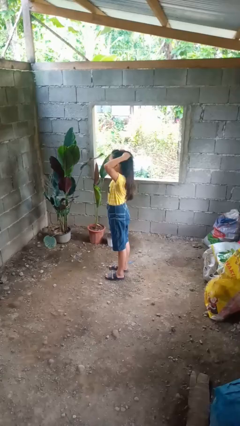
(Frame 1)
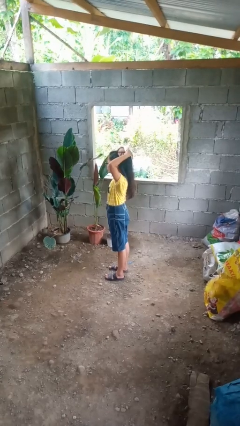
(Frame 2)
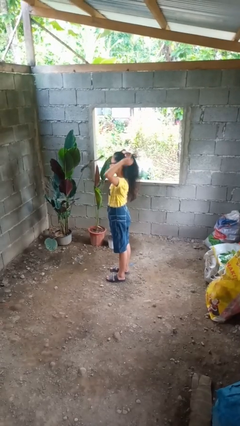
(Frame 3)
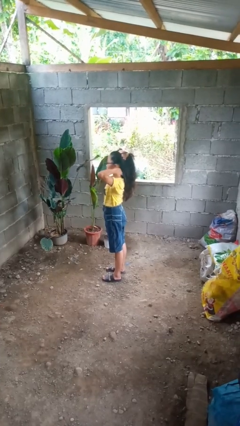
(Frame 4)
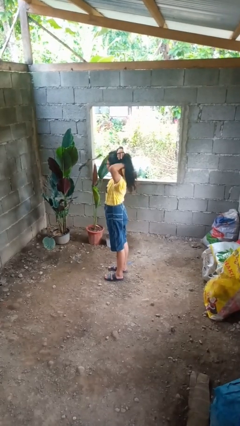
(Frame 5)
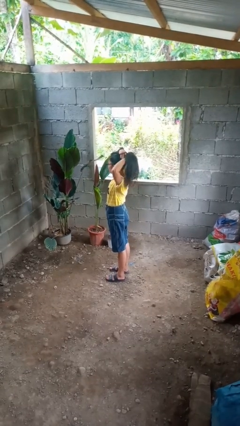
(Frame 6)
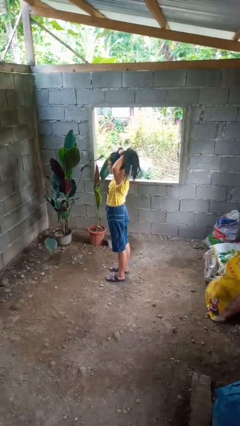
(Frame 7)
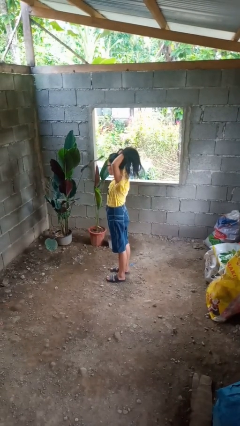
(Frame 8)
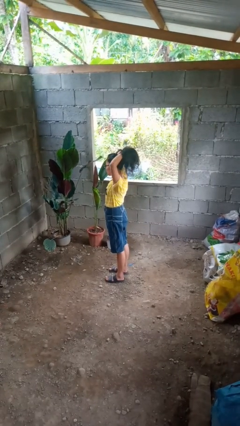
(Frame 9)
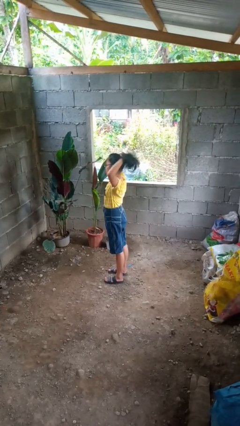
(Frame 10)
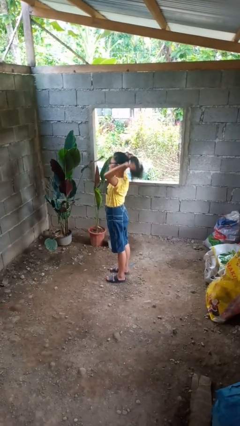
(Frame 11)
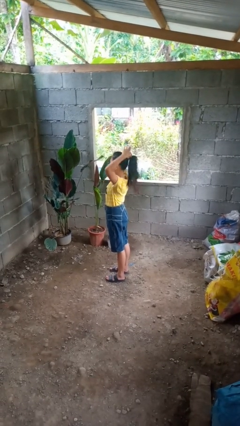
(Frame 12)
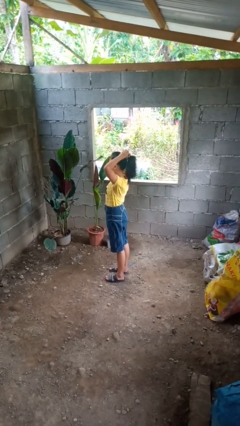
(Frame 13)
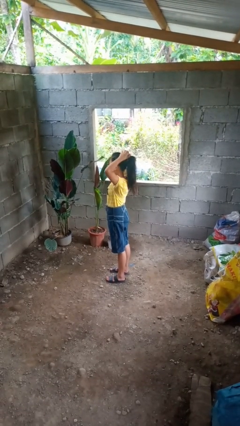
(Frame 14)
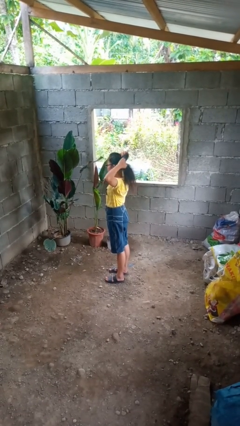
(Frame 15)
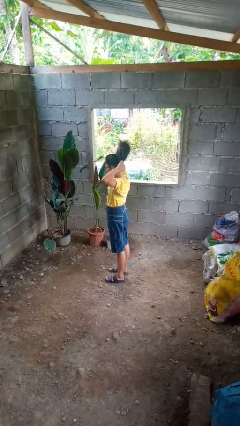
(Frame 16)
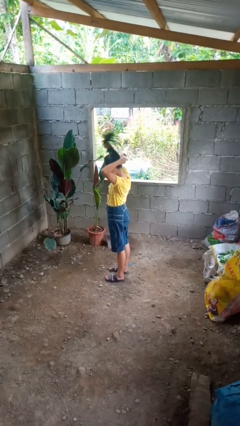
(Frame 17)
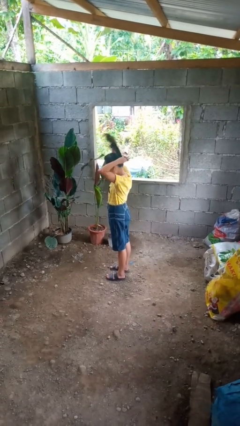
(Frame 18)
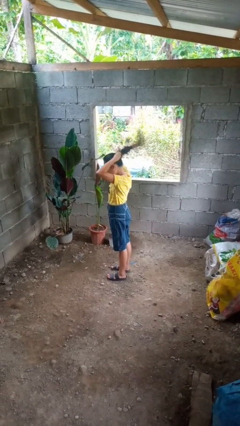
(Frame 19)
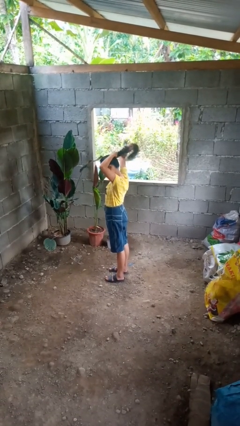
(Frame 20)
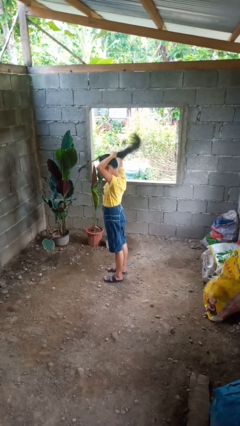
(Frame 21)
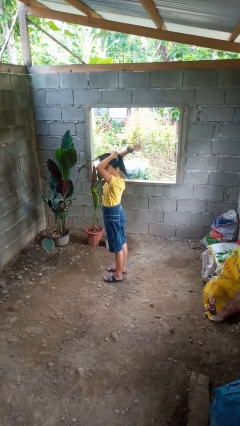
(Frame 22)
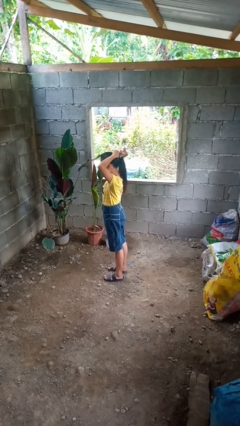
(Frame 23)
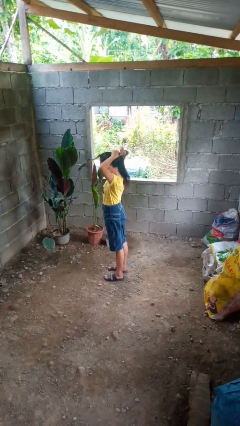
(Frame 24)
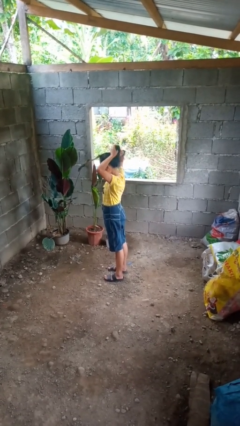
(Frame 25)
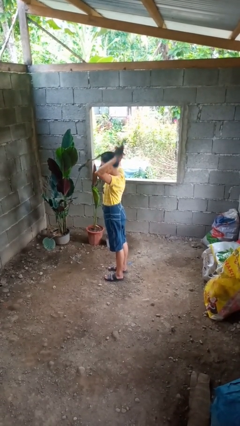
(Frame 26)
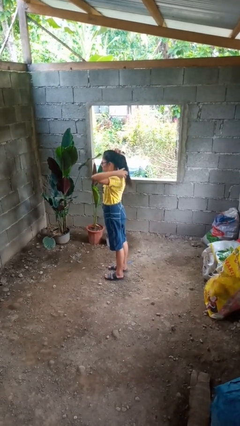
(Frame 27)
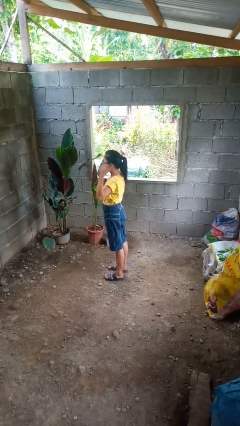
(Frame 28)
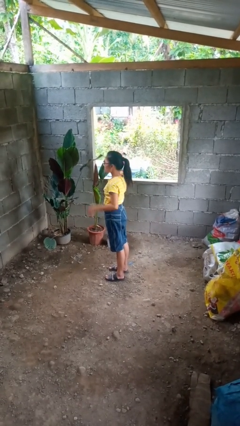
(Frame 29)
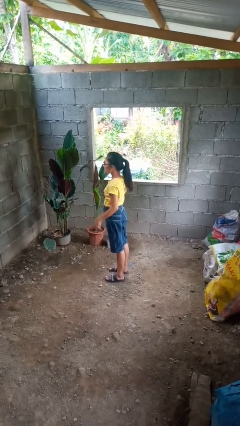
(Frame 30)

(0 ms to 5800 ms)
person puts hair in ponytail

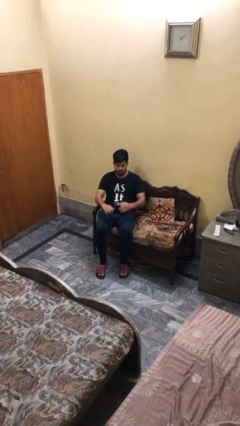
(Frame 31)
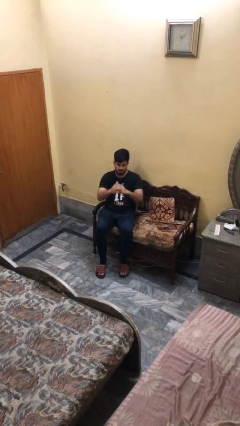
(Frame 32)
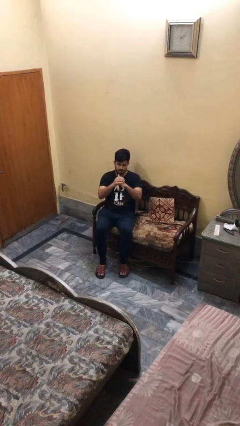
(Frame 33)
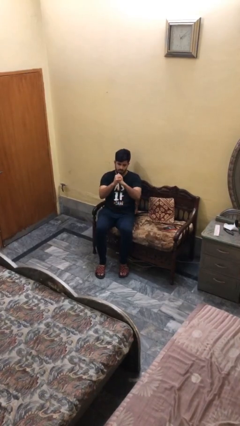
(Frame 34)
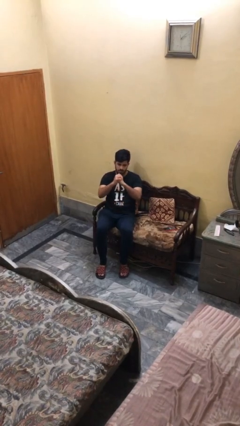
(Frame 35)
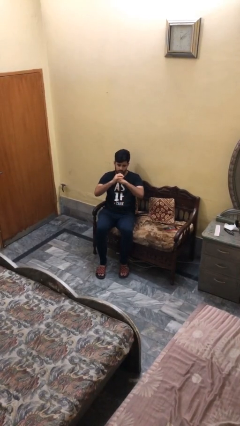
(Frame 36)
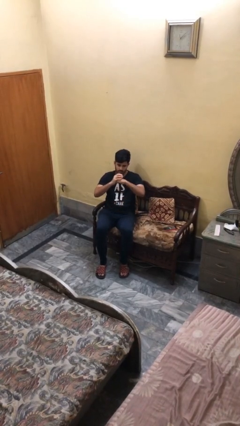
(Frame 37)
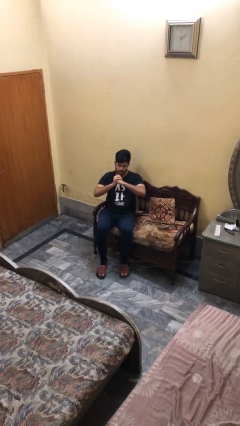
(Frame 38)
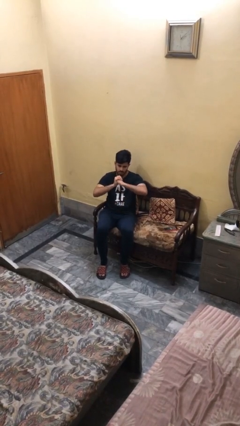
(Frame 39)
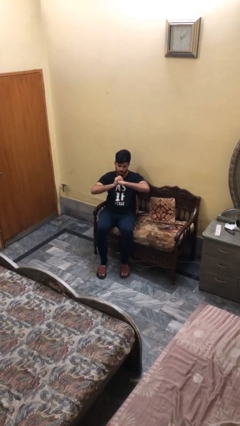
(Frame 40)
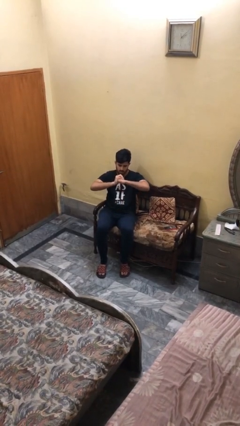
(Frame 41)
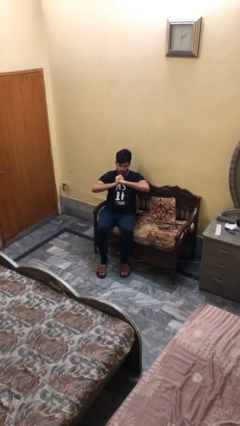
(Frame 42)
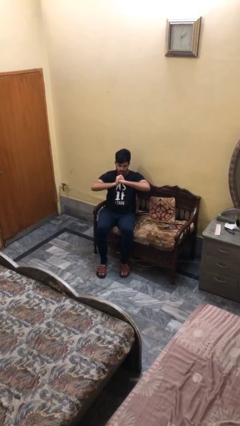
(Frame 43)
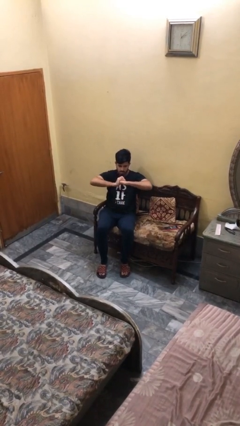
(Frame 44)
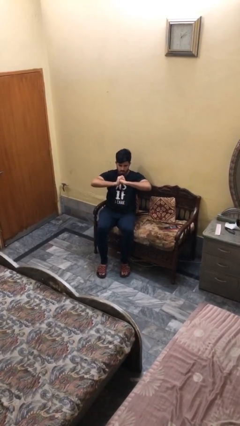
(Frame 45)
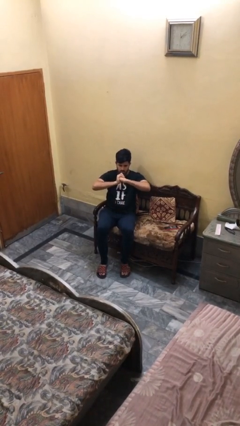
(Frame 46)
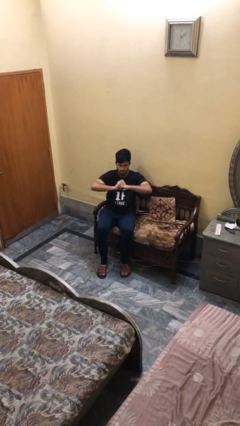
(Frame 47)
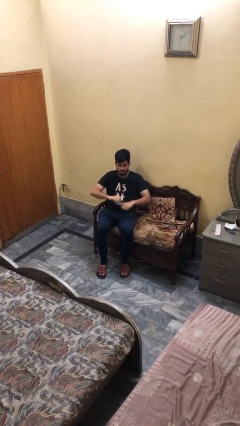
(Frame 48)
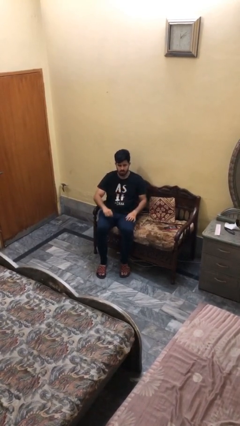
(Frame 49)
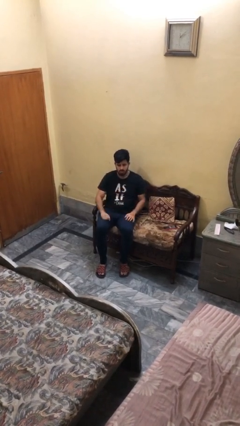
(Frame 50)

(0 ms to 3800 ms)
person cracks knuckles

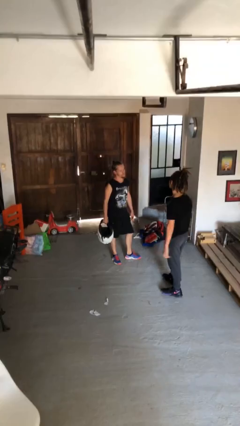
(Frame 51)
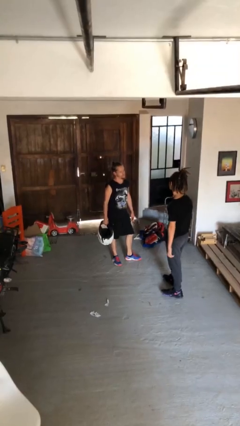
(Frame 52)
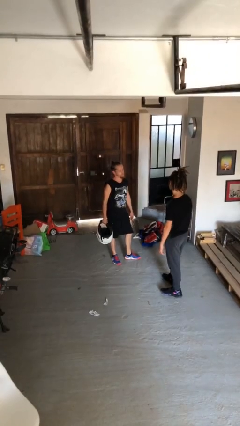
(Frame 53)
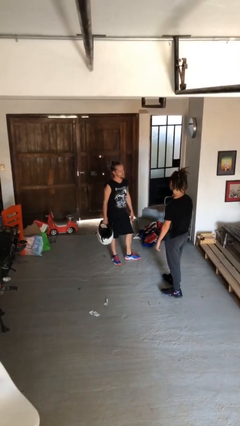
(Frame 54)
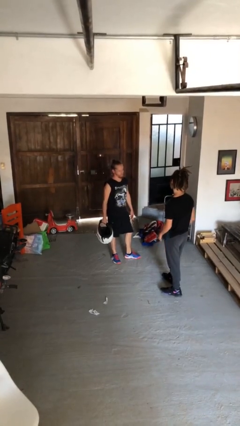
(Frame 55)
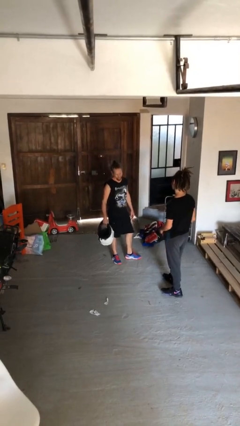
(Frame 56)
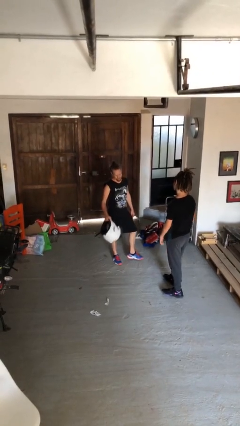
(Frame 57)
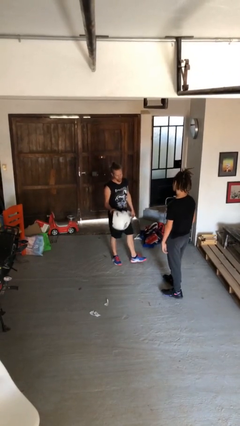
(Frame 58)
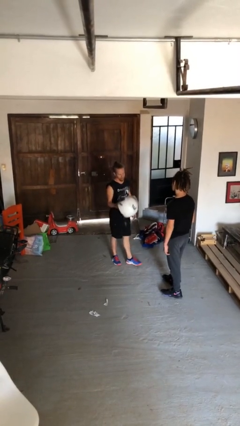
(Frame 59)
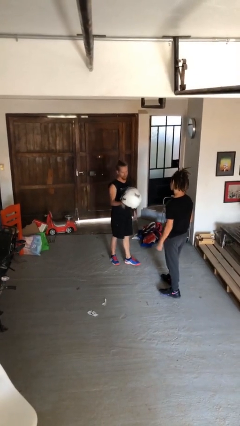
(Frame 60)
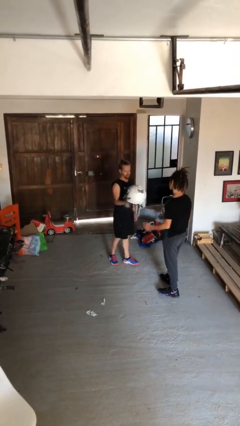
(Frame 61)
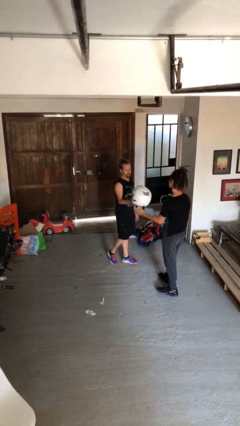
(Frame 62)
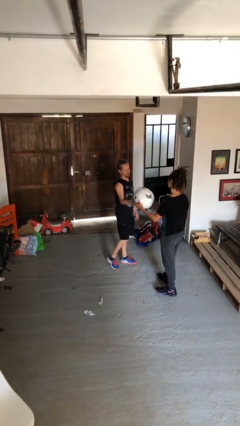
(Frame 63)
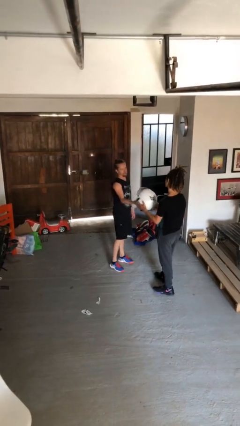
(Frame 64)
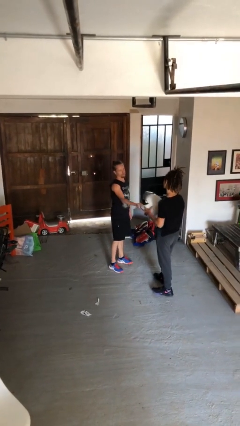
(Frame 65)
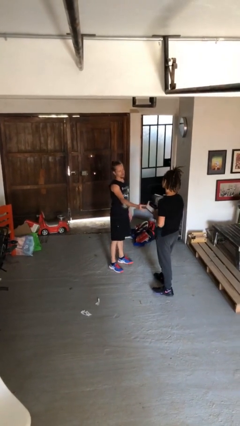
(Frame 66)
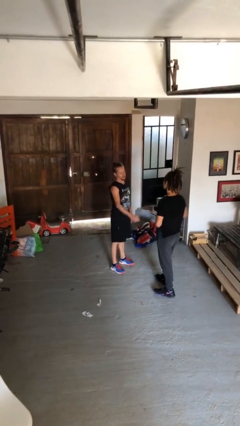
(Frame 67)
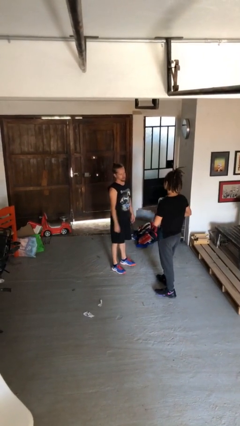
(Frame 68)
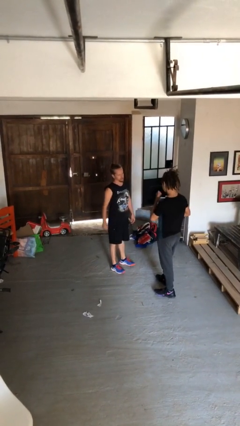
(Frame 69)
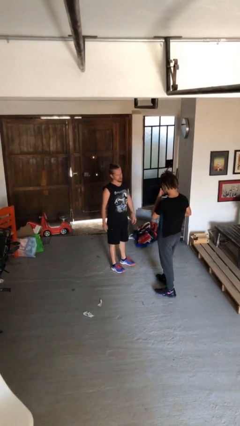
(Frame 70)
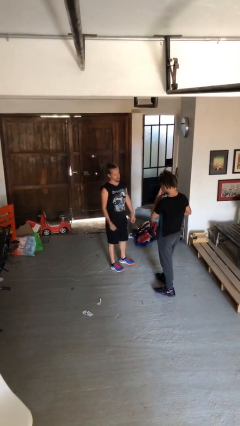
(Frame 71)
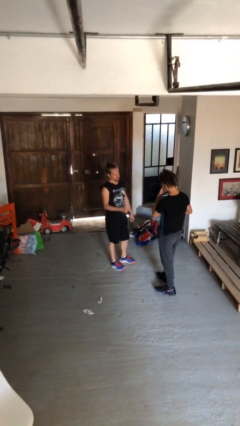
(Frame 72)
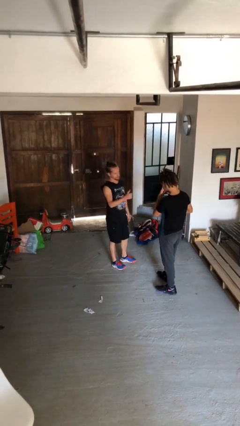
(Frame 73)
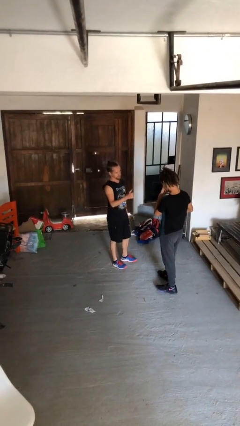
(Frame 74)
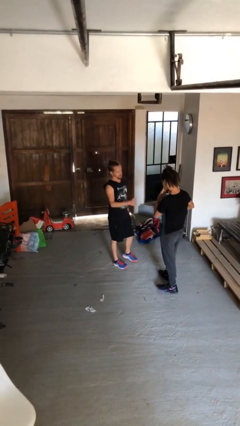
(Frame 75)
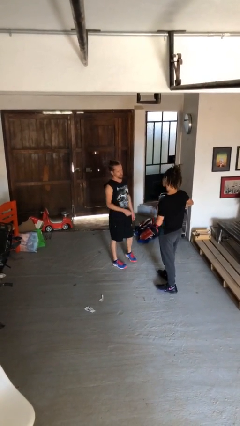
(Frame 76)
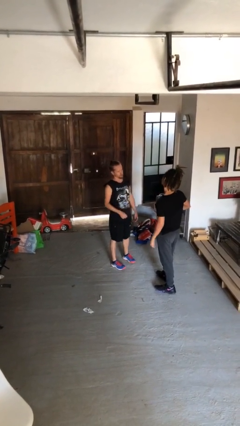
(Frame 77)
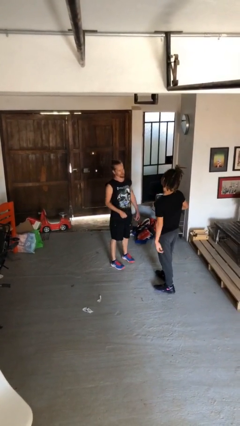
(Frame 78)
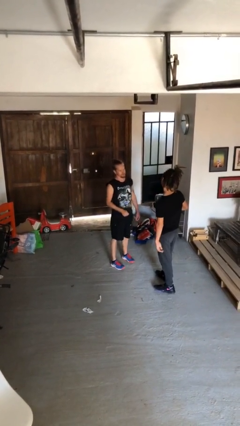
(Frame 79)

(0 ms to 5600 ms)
person holds hand

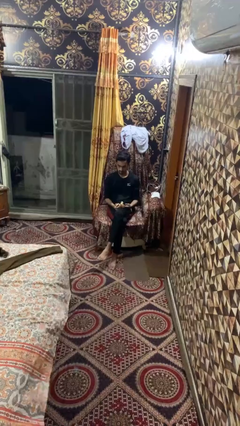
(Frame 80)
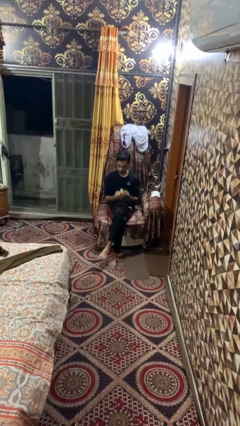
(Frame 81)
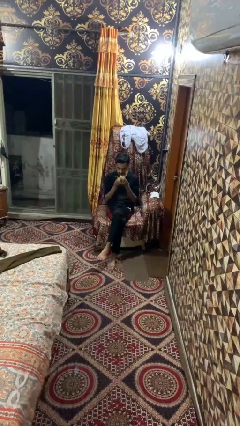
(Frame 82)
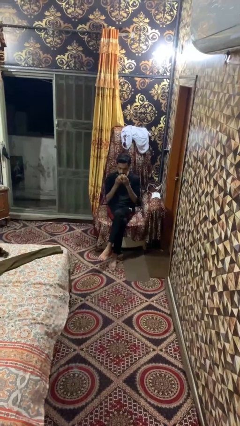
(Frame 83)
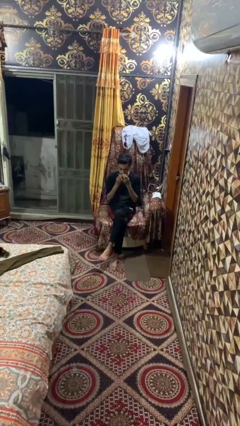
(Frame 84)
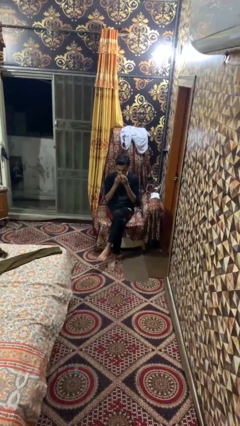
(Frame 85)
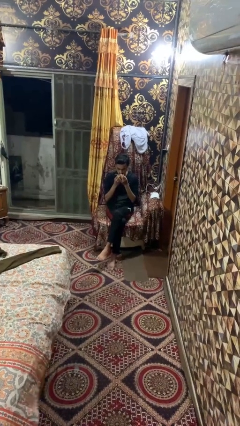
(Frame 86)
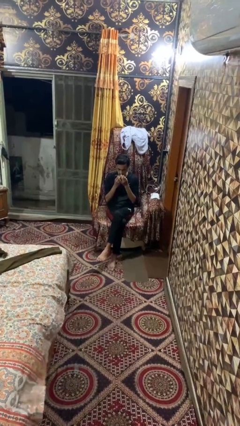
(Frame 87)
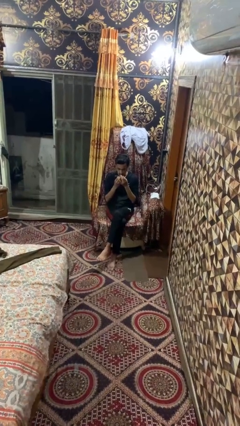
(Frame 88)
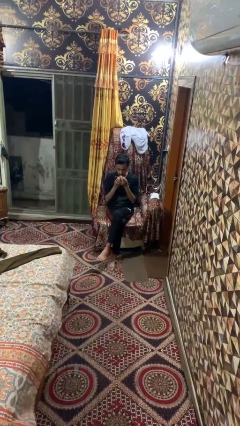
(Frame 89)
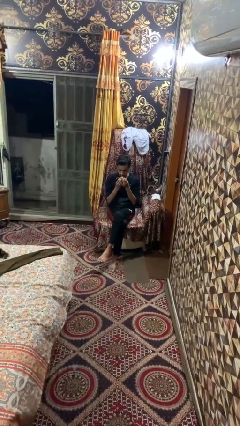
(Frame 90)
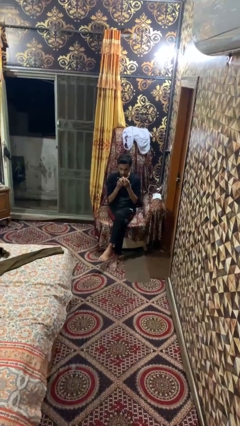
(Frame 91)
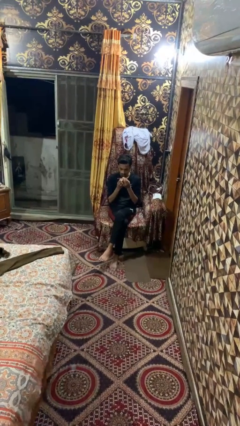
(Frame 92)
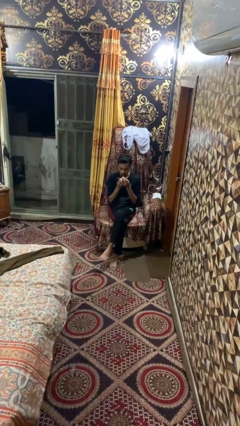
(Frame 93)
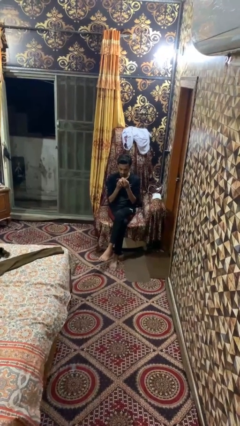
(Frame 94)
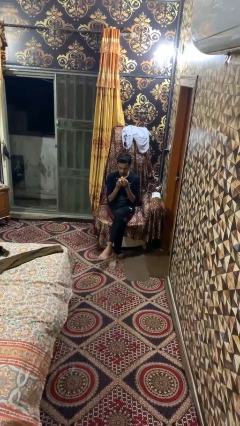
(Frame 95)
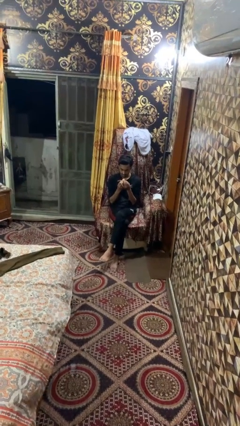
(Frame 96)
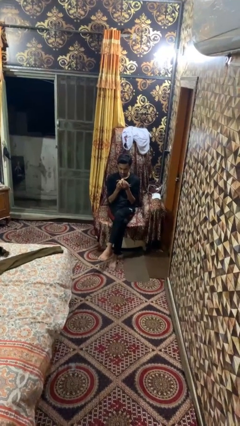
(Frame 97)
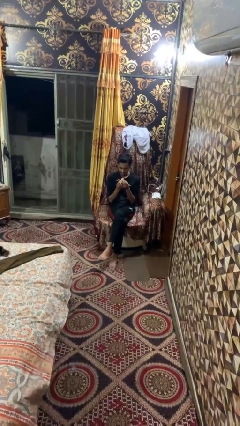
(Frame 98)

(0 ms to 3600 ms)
person eats banana
